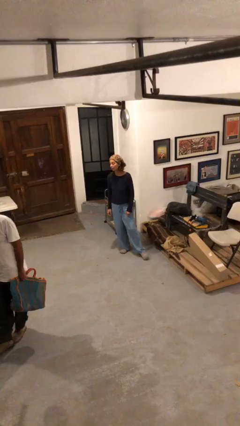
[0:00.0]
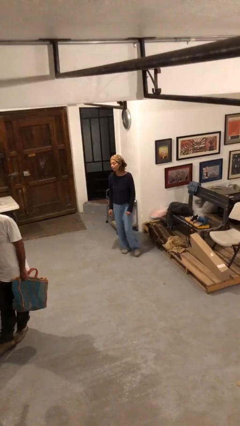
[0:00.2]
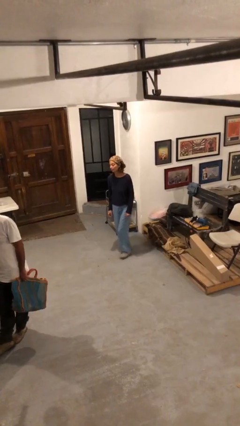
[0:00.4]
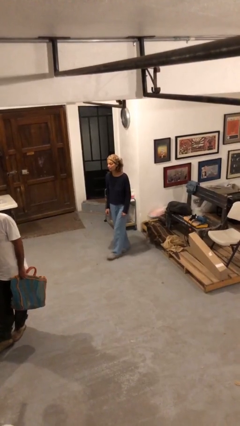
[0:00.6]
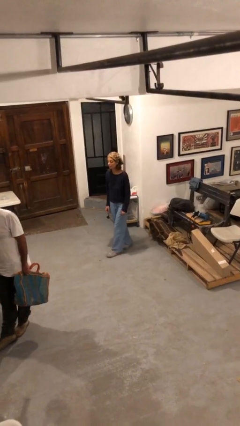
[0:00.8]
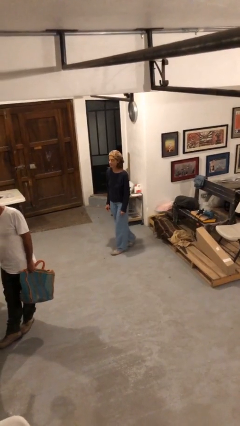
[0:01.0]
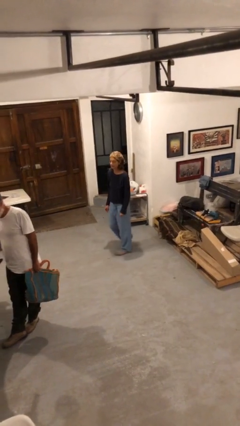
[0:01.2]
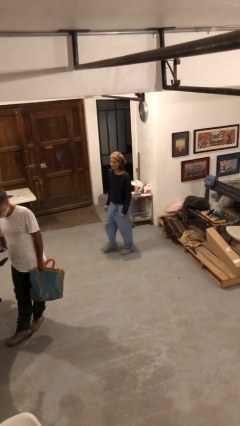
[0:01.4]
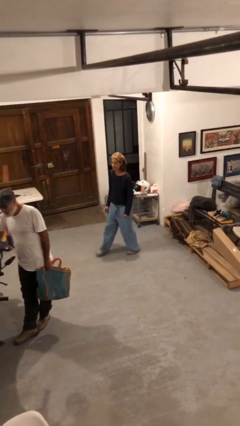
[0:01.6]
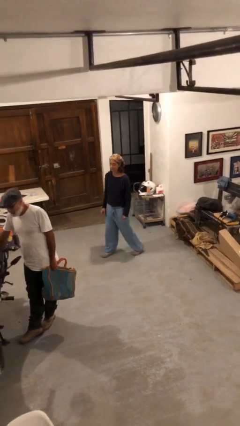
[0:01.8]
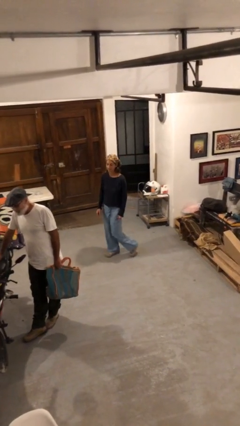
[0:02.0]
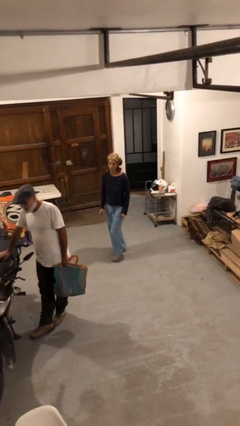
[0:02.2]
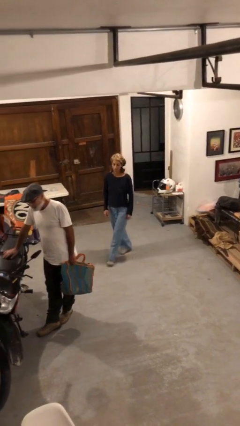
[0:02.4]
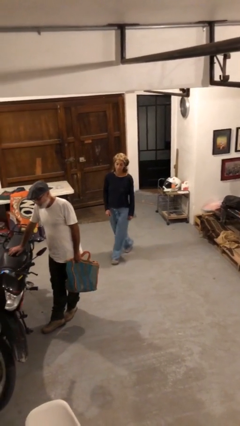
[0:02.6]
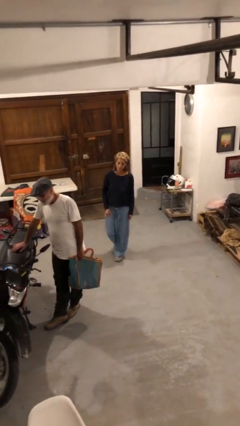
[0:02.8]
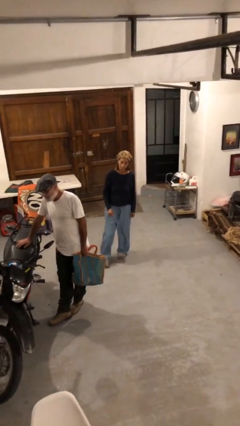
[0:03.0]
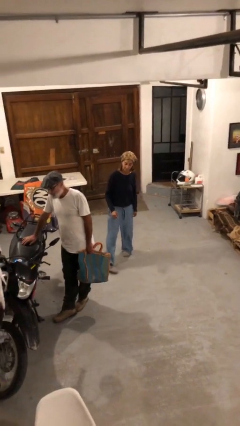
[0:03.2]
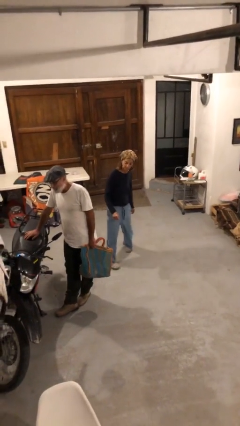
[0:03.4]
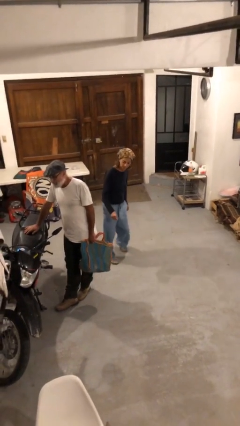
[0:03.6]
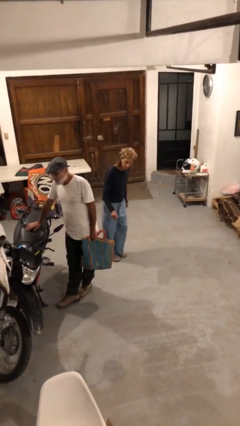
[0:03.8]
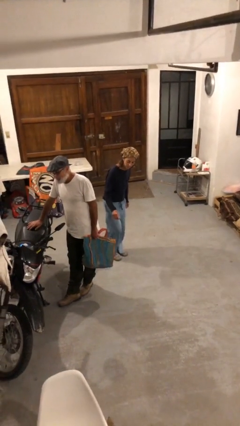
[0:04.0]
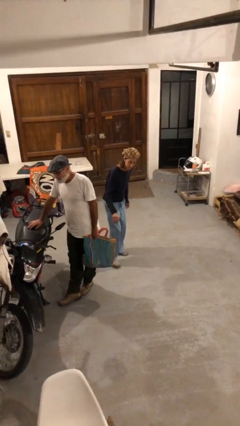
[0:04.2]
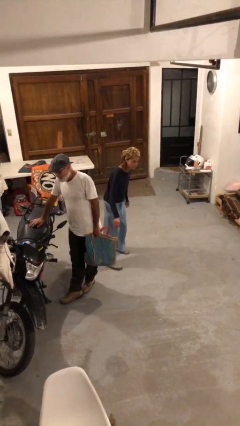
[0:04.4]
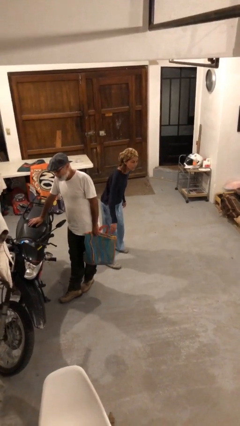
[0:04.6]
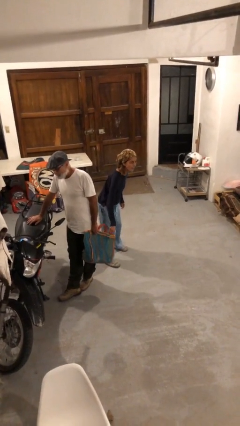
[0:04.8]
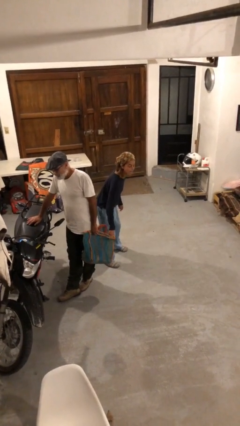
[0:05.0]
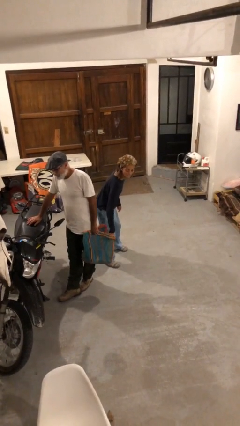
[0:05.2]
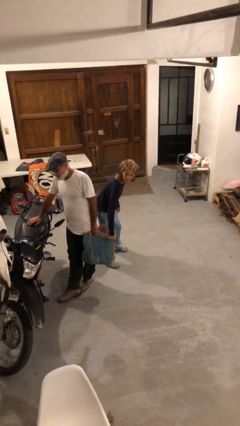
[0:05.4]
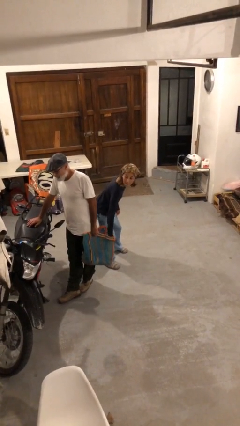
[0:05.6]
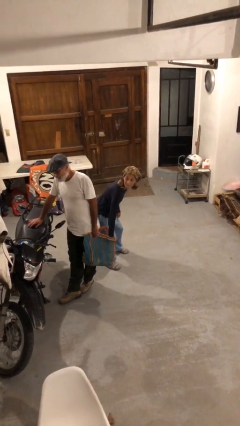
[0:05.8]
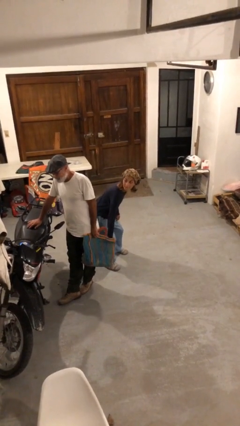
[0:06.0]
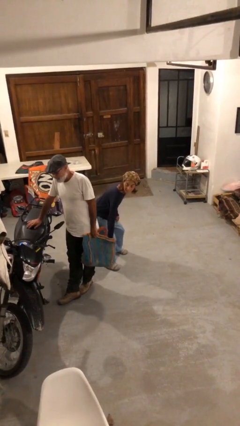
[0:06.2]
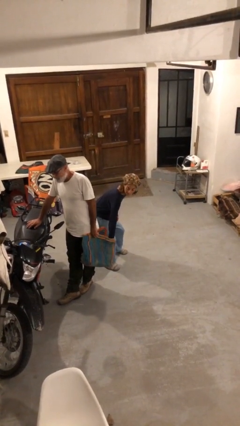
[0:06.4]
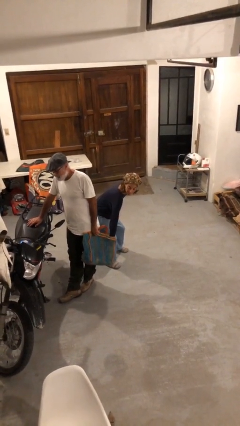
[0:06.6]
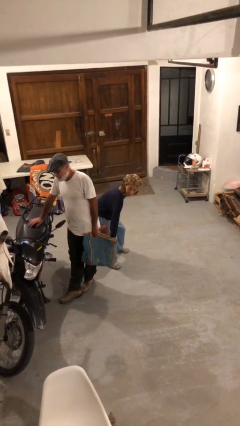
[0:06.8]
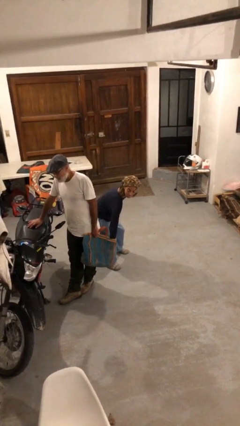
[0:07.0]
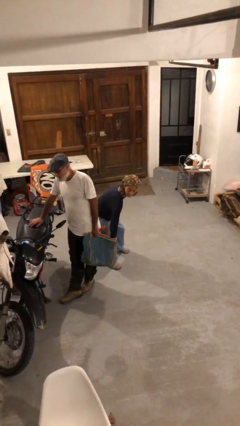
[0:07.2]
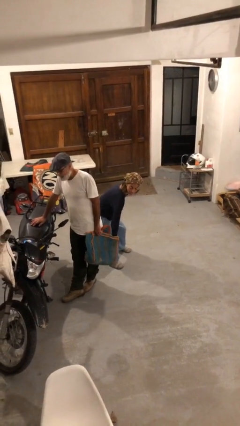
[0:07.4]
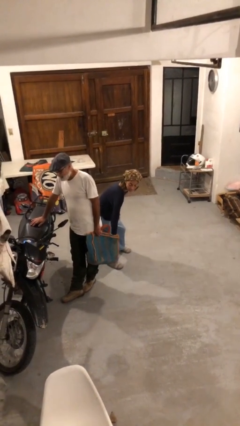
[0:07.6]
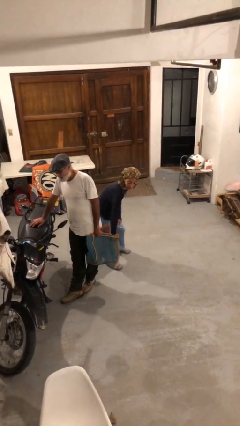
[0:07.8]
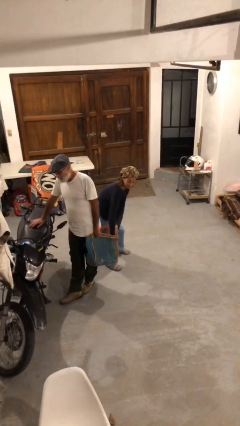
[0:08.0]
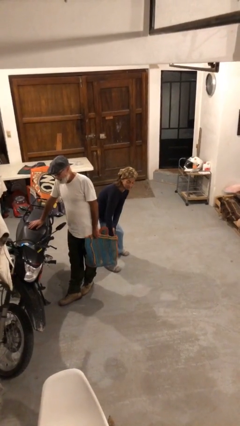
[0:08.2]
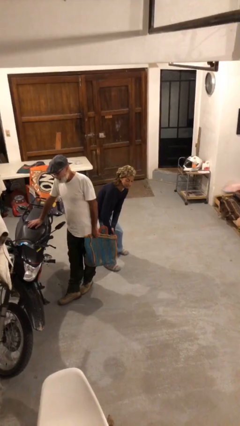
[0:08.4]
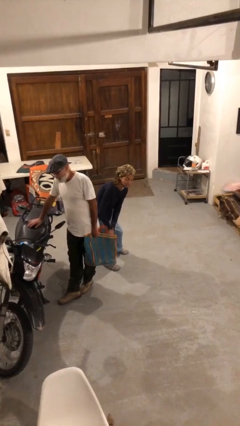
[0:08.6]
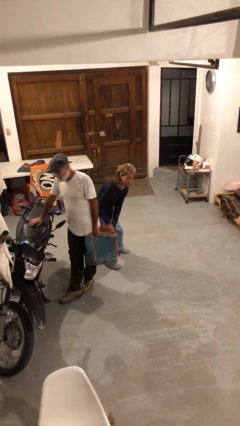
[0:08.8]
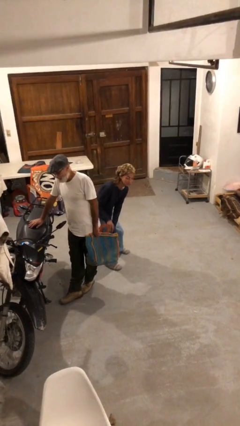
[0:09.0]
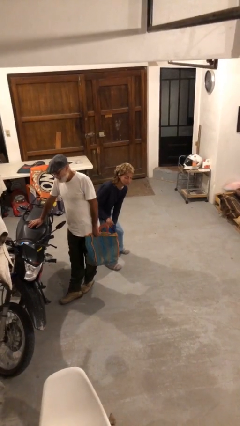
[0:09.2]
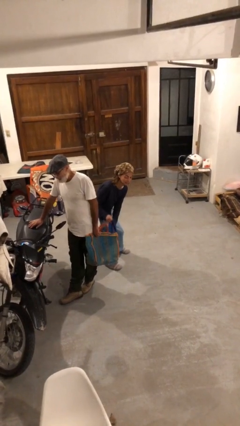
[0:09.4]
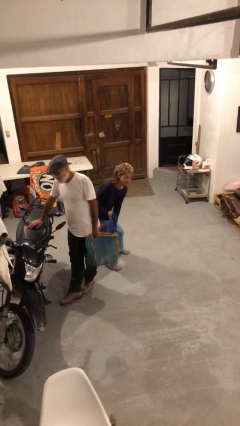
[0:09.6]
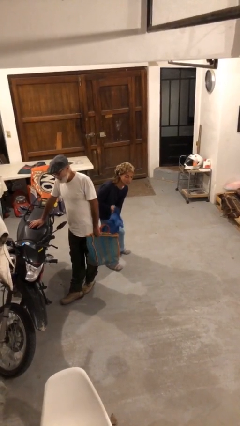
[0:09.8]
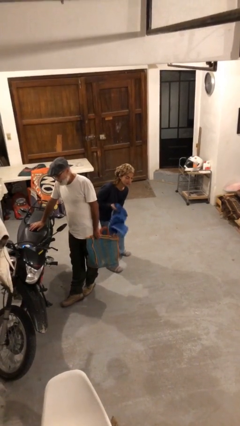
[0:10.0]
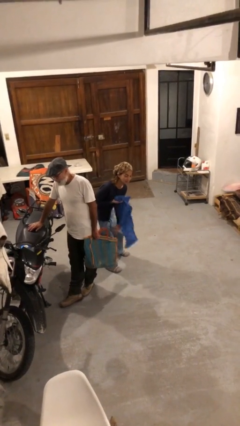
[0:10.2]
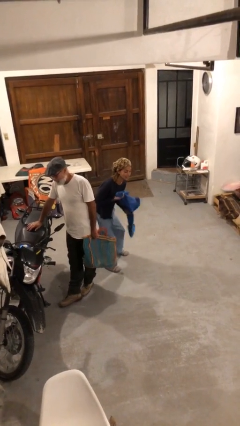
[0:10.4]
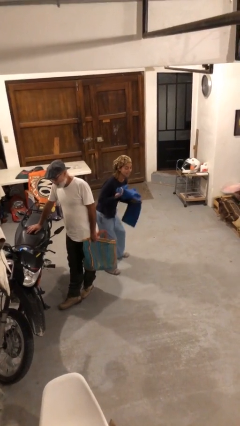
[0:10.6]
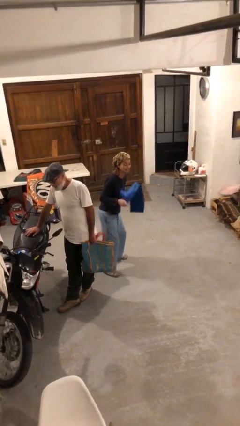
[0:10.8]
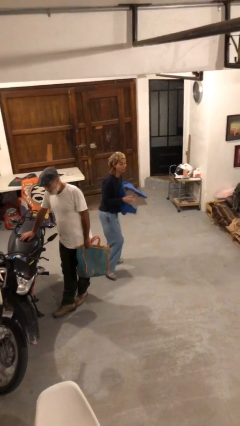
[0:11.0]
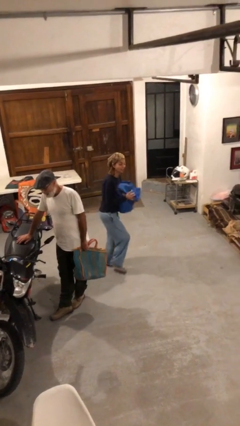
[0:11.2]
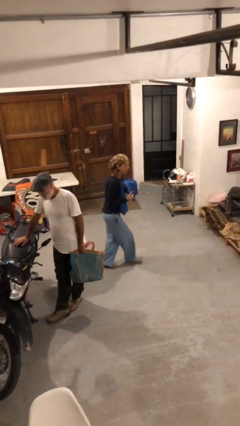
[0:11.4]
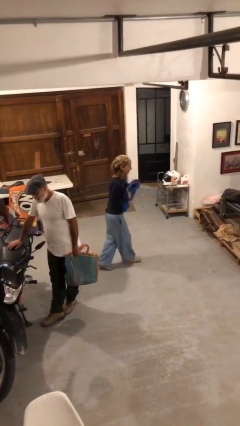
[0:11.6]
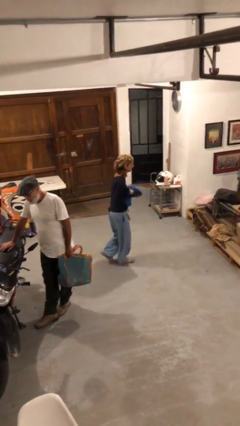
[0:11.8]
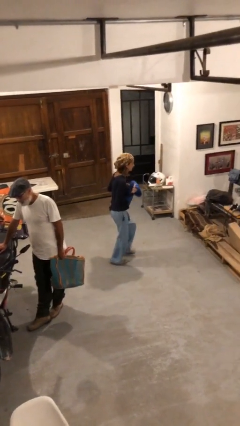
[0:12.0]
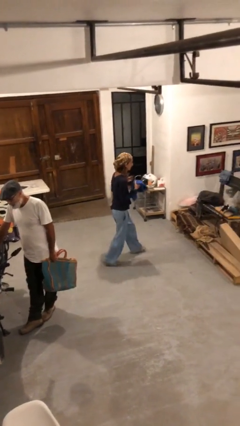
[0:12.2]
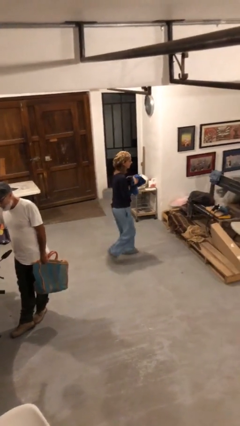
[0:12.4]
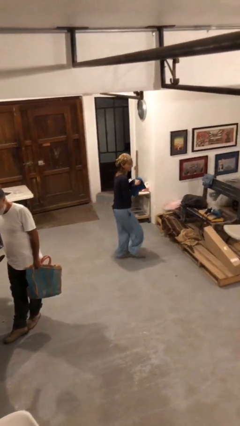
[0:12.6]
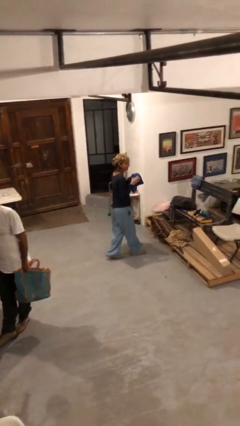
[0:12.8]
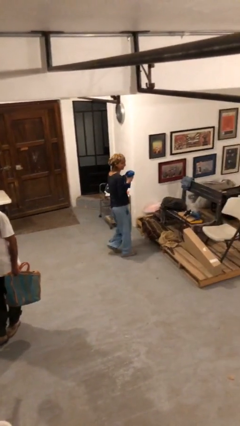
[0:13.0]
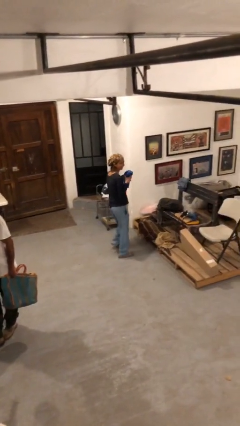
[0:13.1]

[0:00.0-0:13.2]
person steals object from person

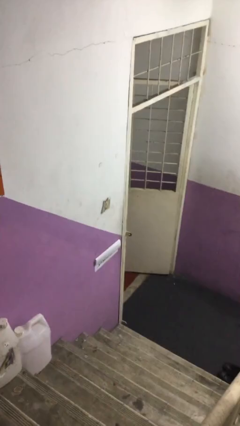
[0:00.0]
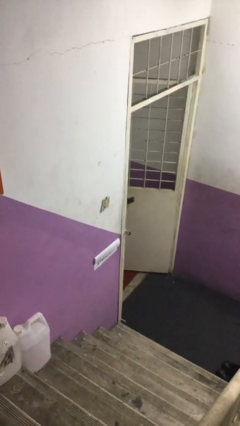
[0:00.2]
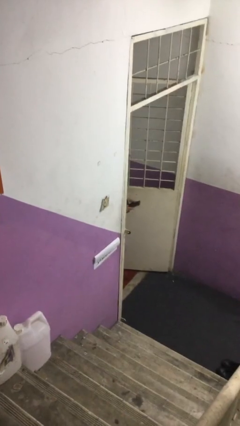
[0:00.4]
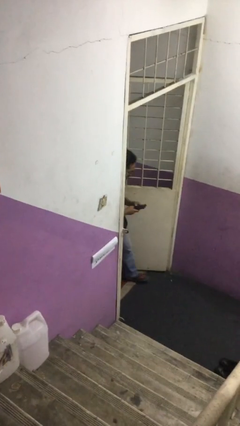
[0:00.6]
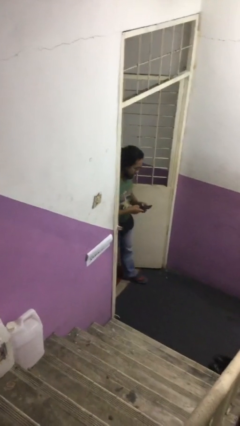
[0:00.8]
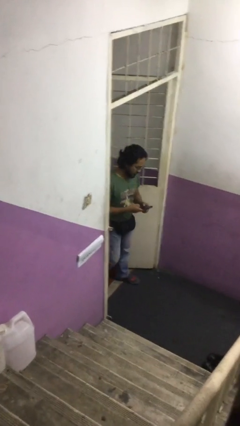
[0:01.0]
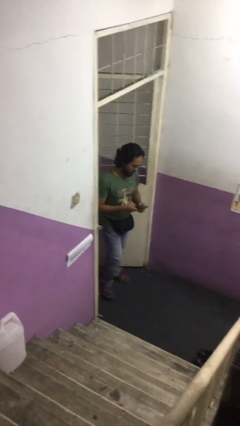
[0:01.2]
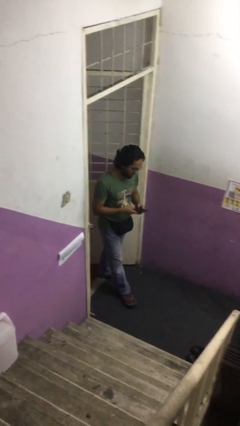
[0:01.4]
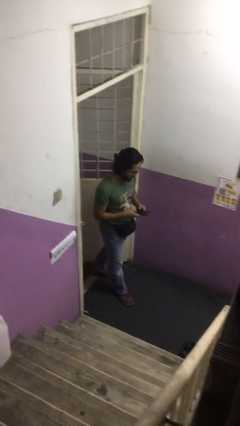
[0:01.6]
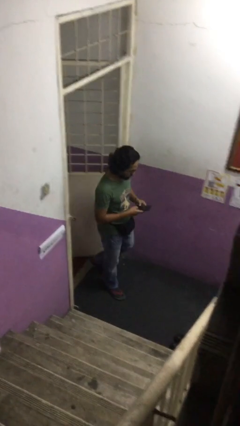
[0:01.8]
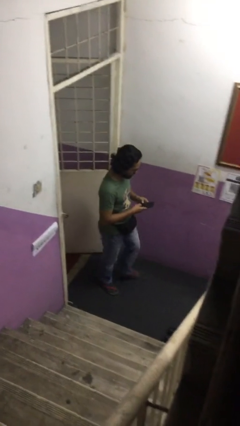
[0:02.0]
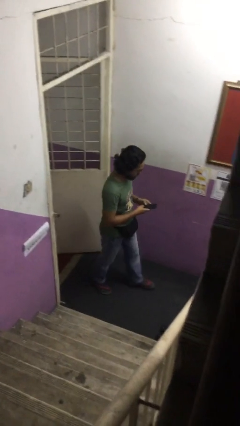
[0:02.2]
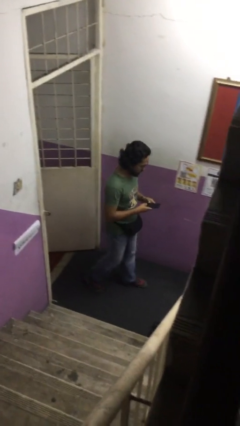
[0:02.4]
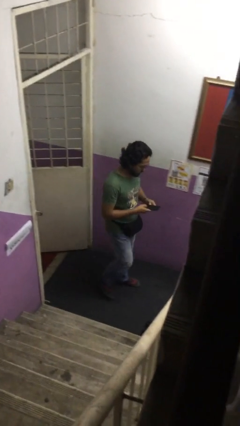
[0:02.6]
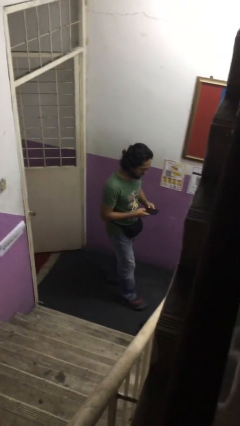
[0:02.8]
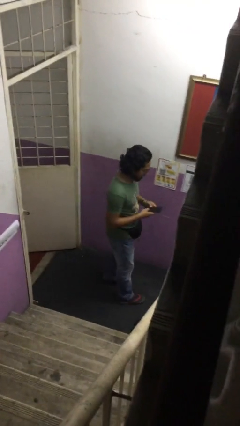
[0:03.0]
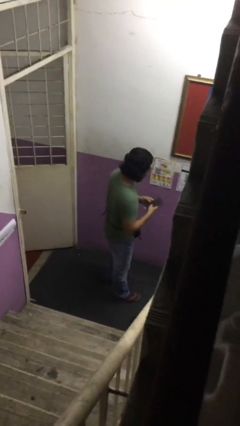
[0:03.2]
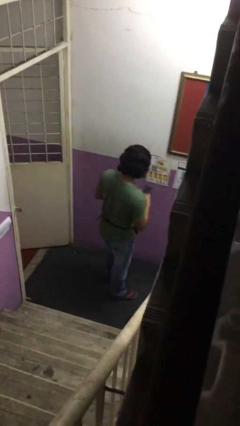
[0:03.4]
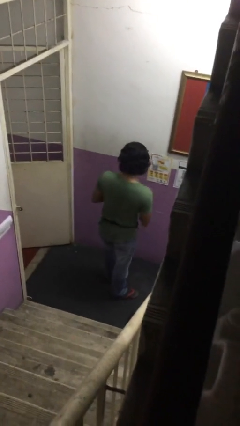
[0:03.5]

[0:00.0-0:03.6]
person enters scene through structure

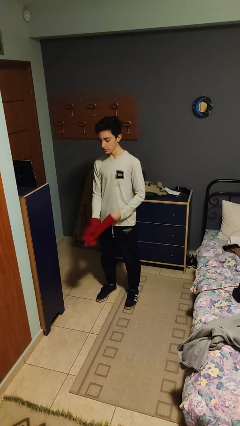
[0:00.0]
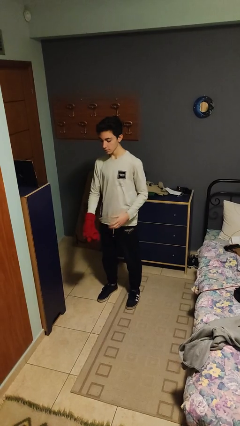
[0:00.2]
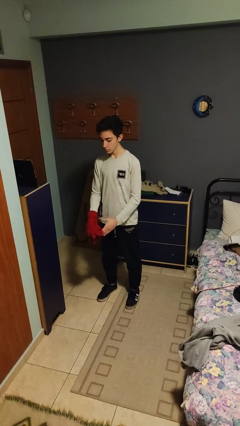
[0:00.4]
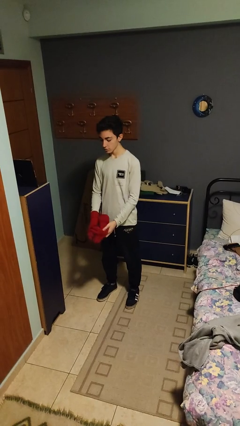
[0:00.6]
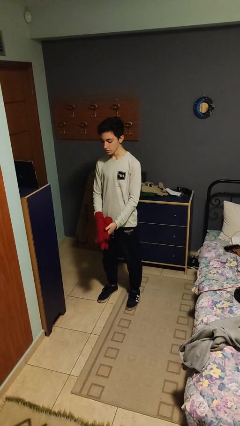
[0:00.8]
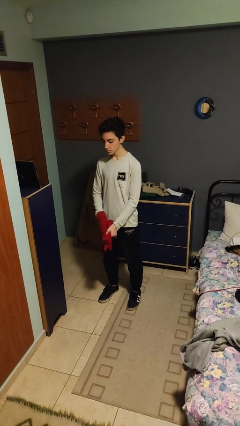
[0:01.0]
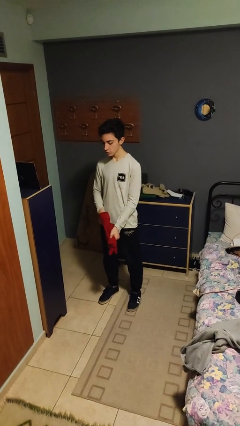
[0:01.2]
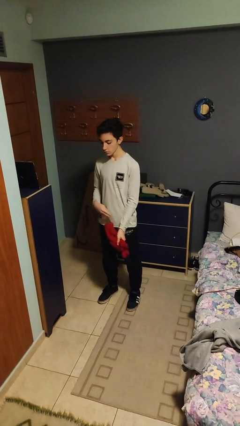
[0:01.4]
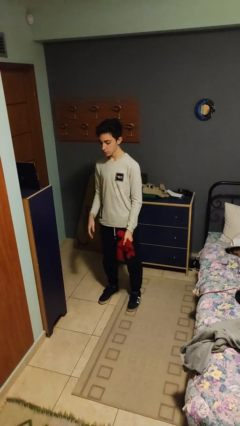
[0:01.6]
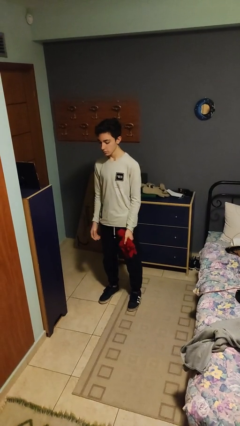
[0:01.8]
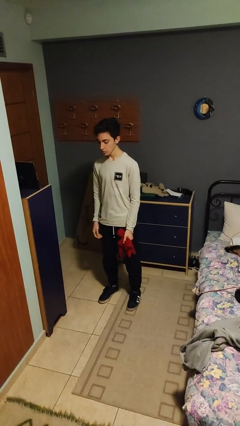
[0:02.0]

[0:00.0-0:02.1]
person takes off gloves
